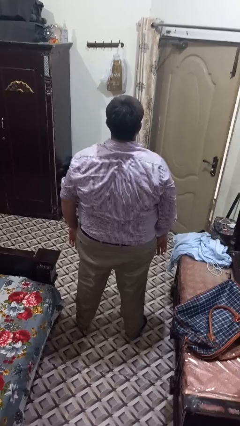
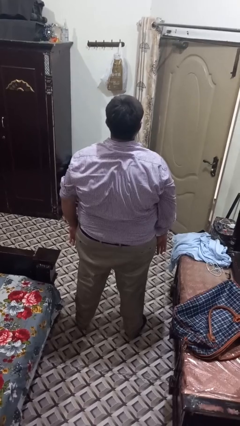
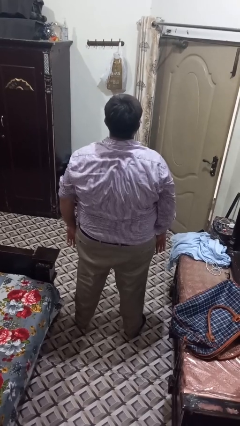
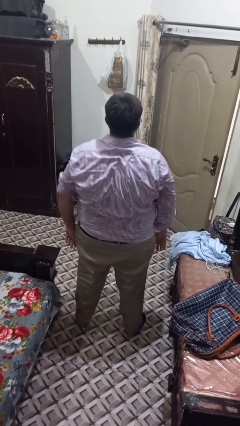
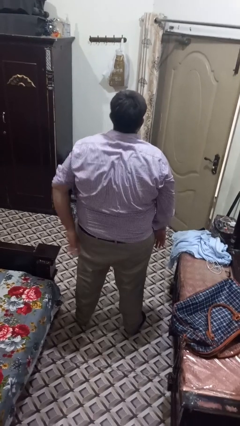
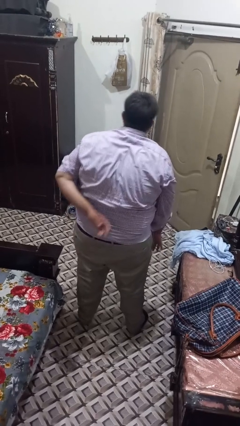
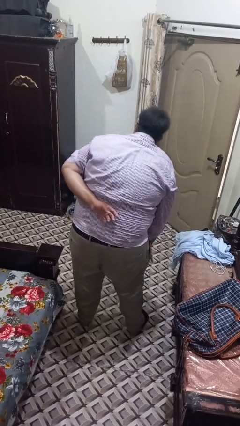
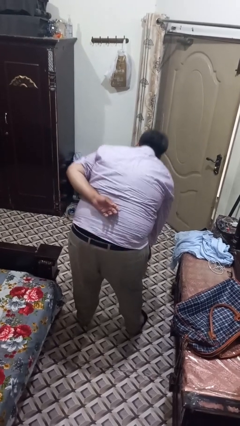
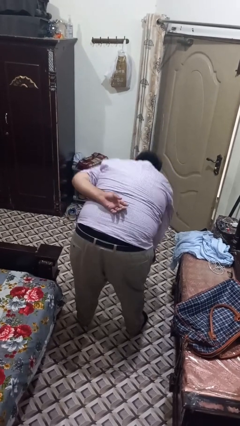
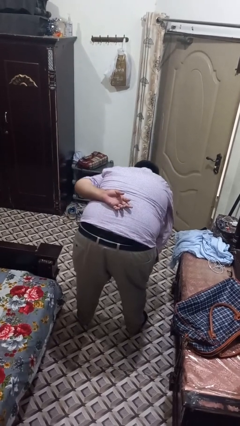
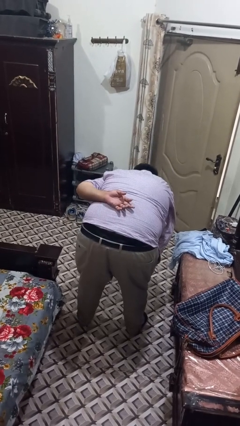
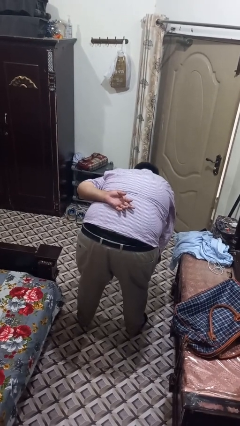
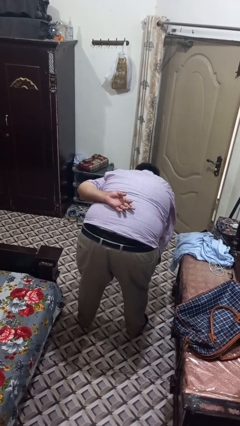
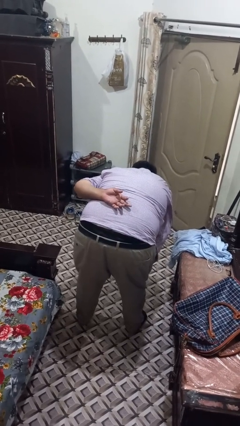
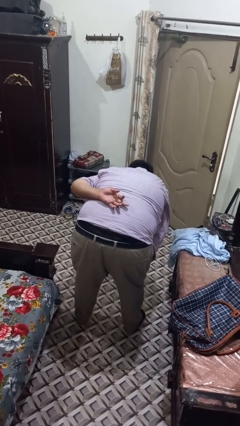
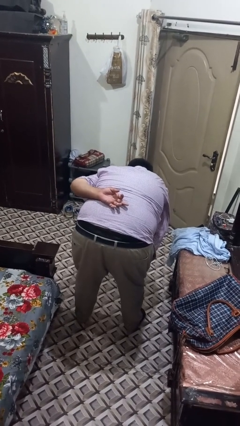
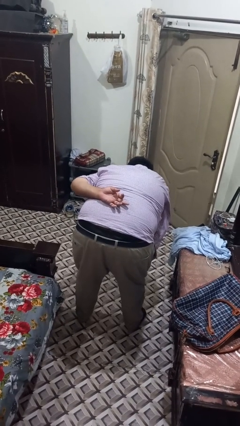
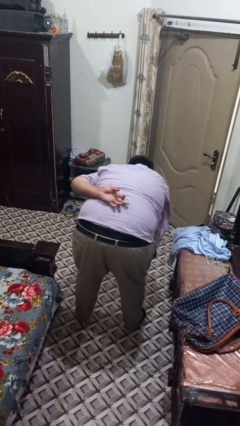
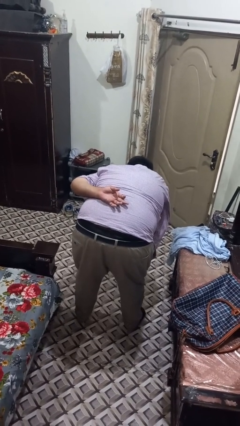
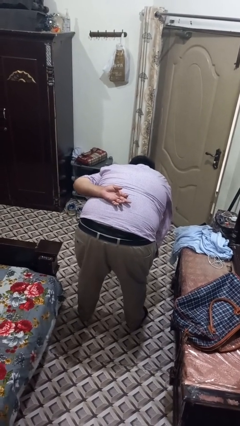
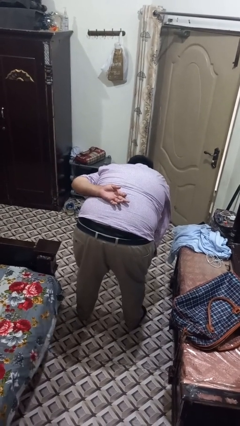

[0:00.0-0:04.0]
person kneels

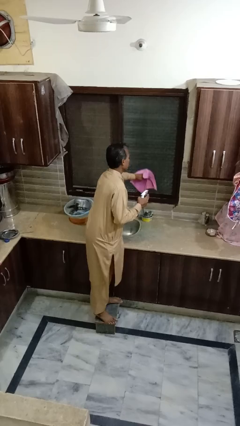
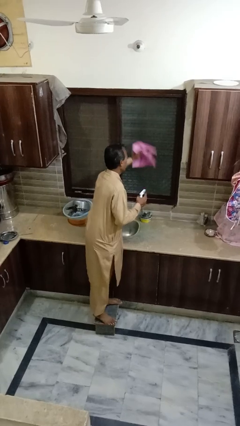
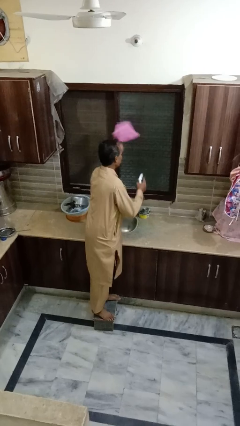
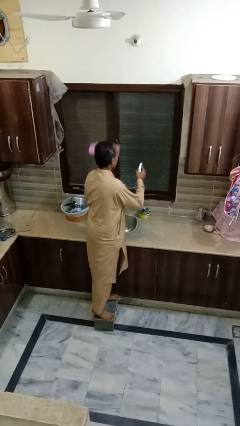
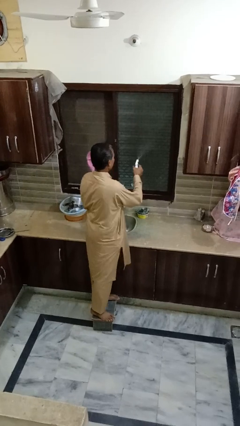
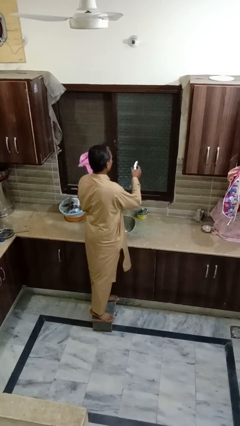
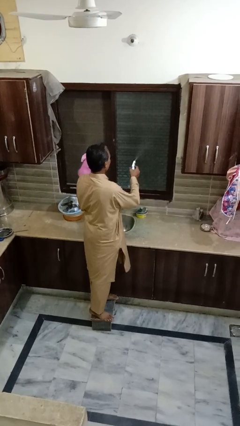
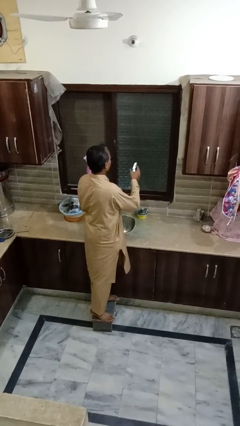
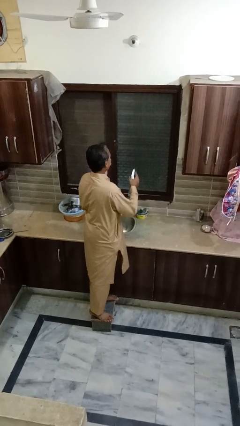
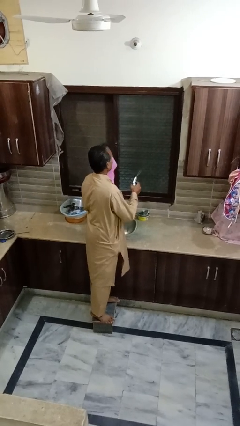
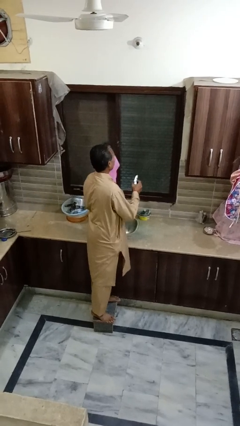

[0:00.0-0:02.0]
person sprays from bottle

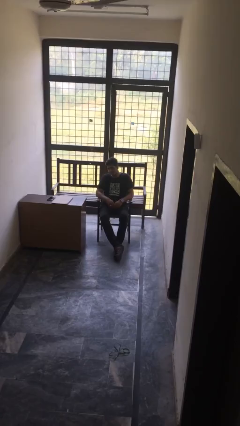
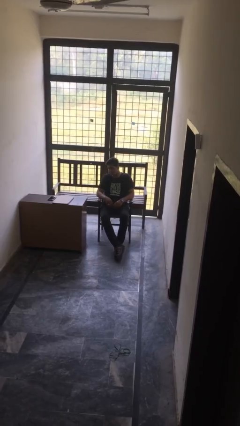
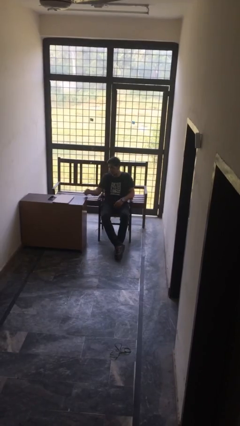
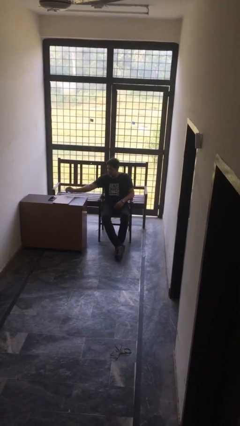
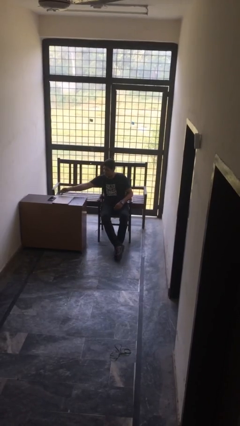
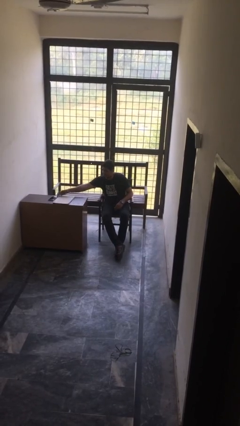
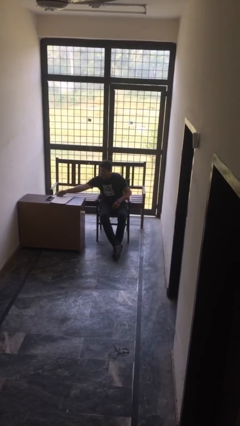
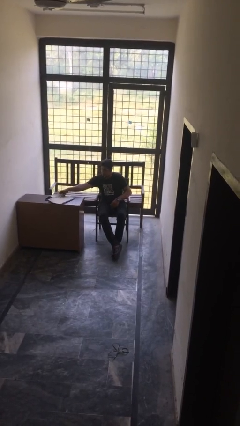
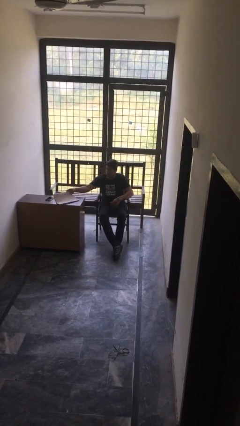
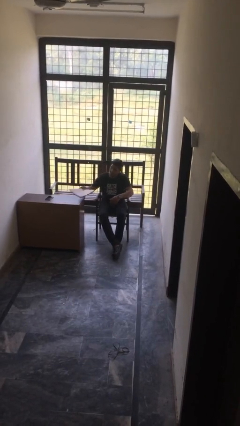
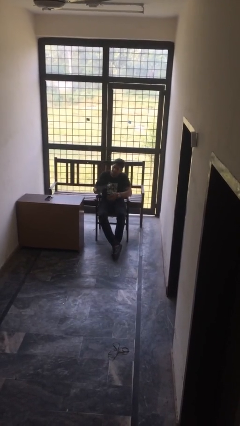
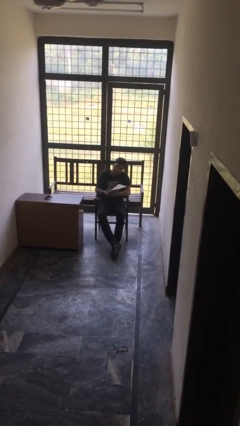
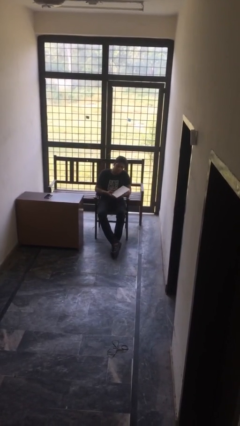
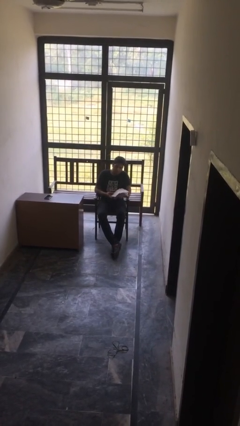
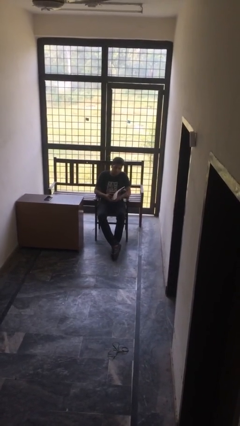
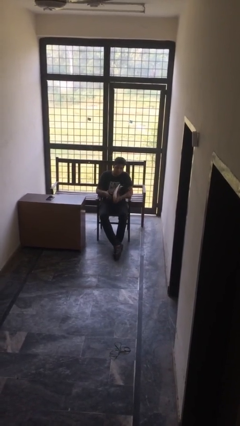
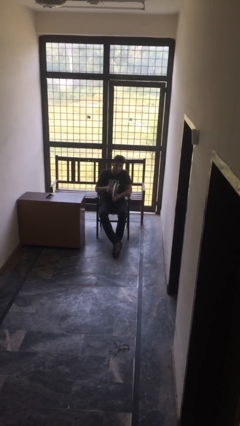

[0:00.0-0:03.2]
person picks up object from table

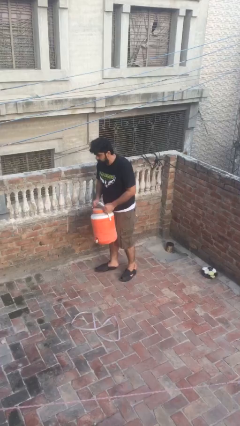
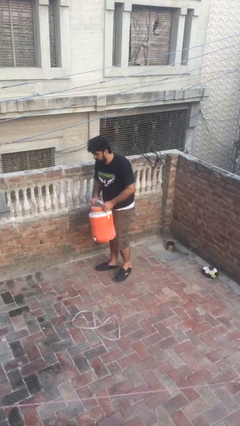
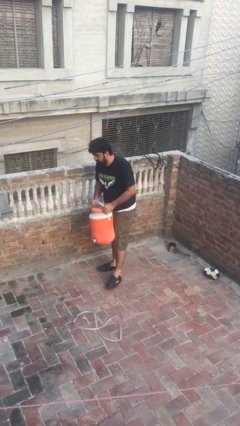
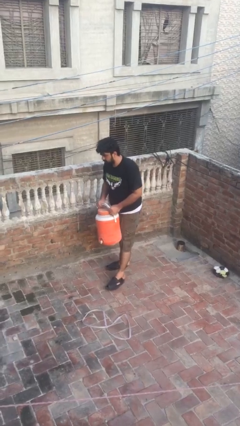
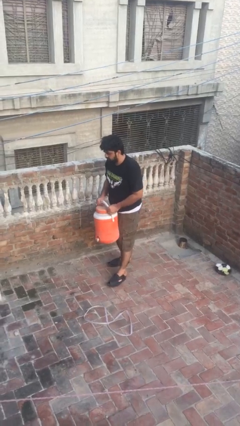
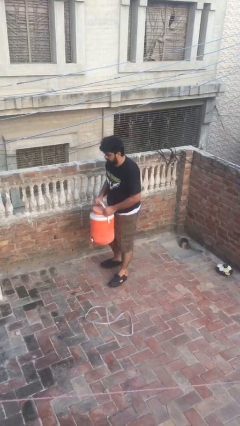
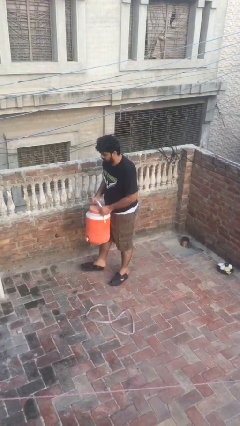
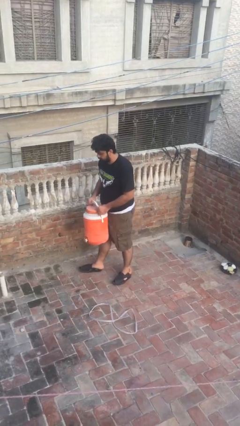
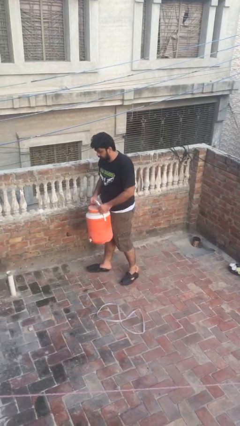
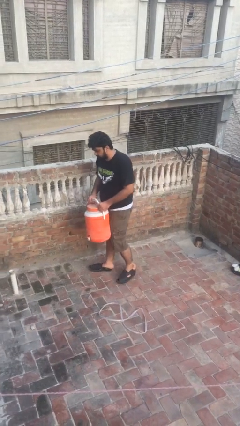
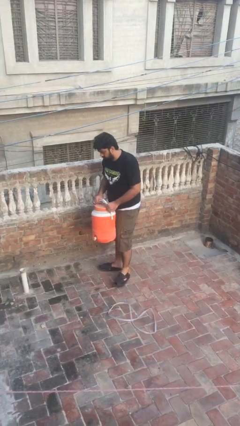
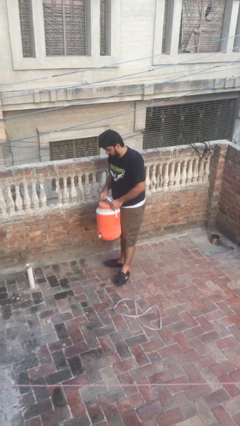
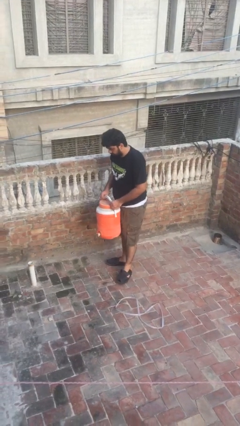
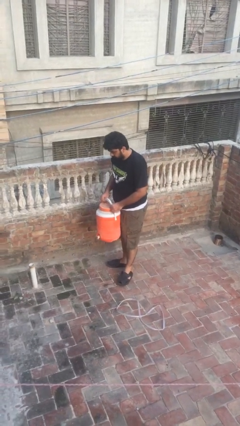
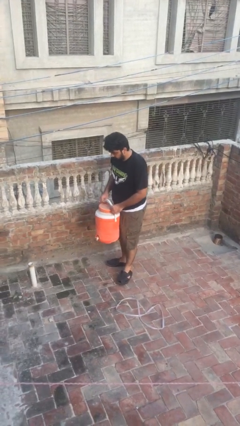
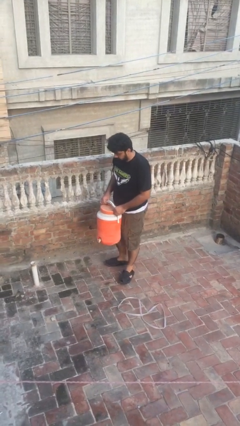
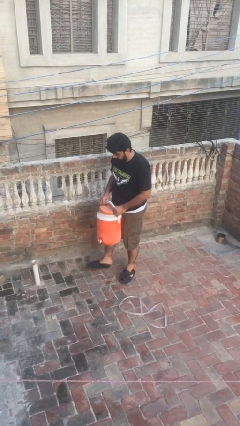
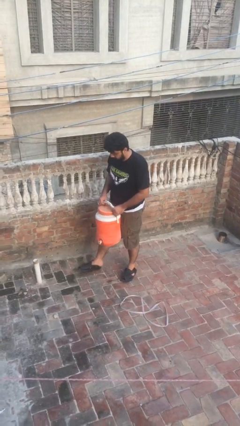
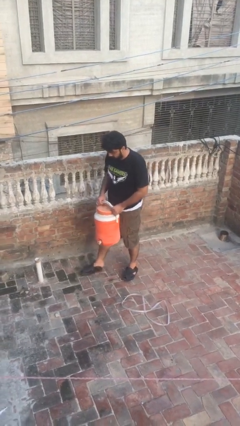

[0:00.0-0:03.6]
person carries heavy object

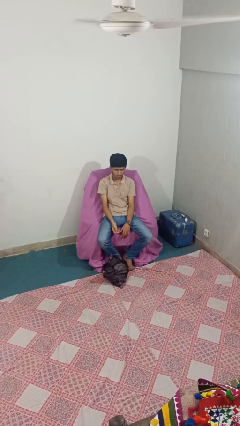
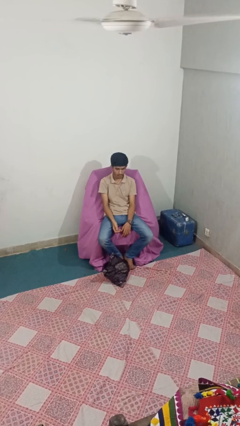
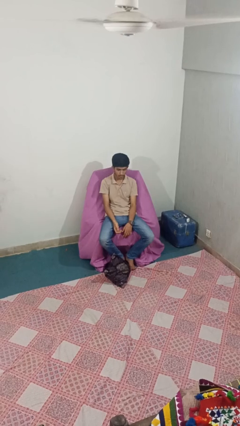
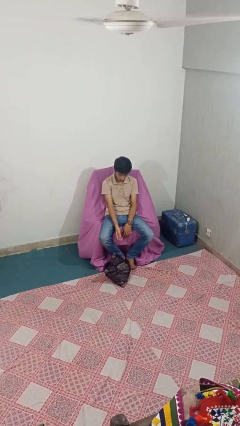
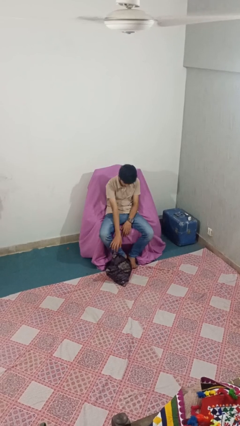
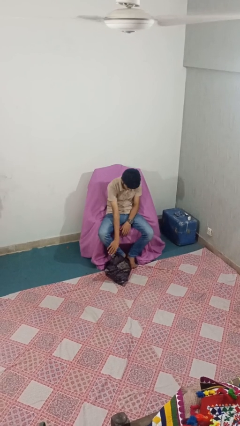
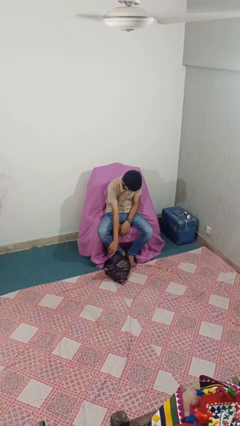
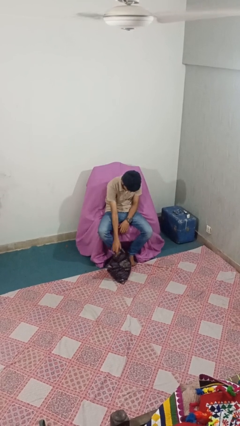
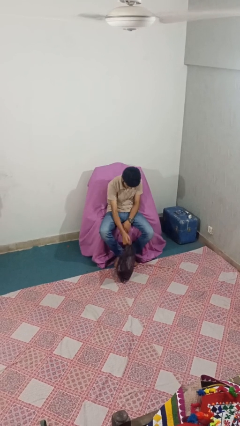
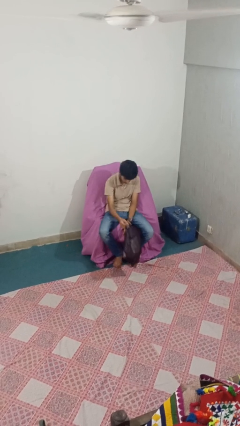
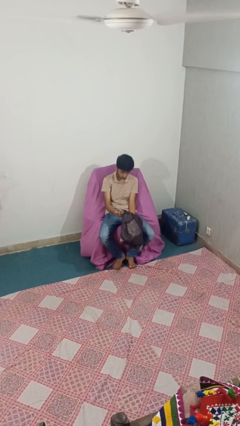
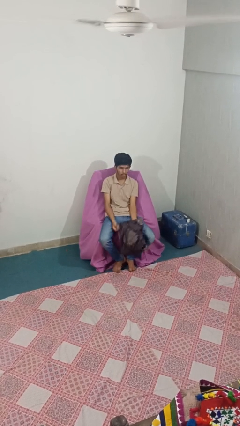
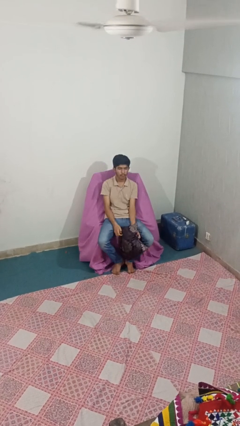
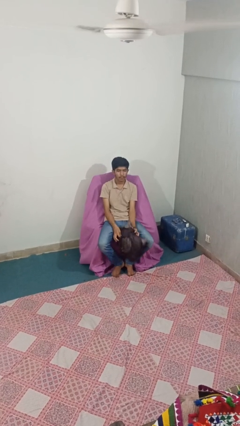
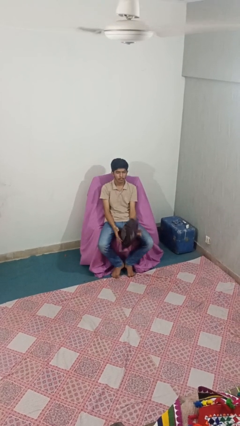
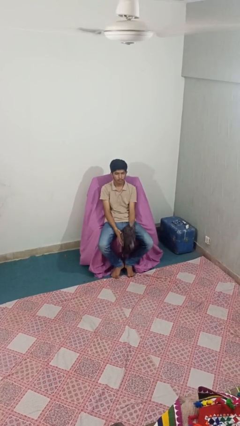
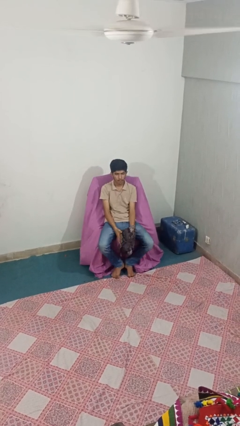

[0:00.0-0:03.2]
person picks up object from floor

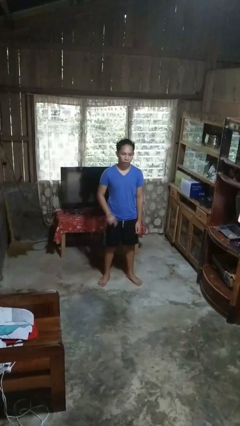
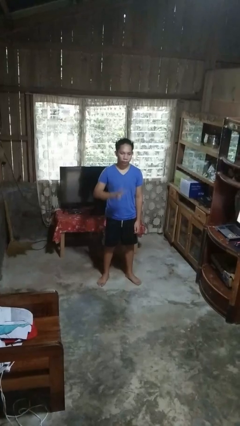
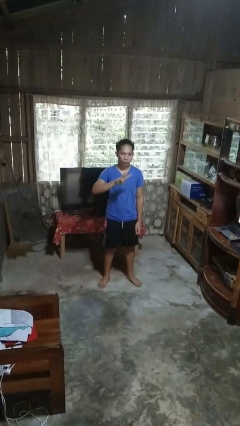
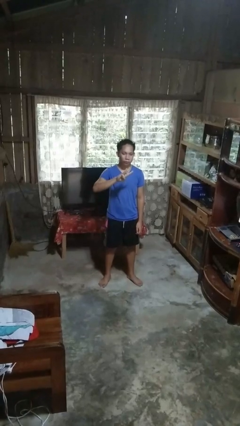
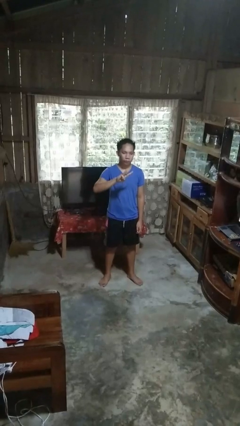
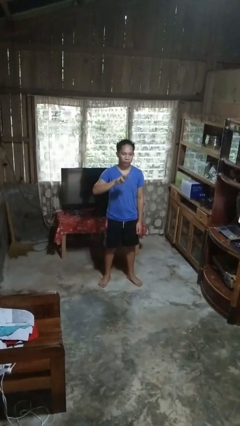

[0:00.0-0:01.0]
person gestures number three
